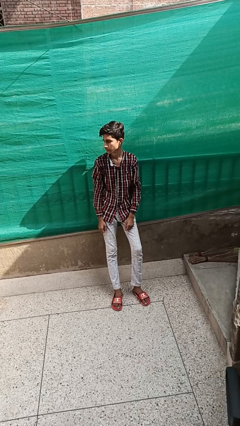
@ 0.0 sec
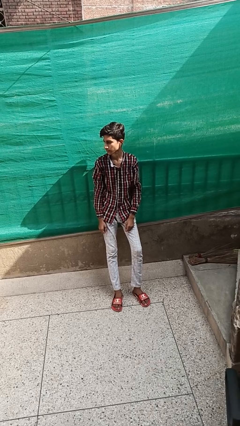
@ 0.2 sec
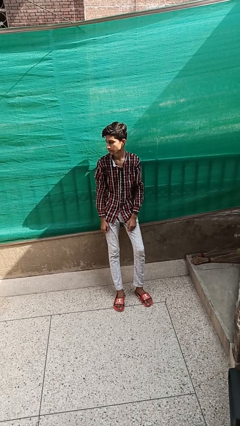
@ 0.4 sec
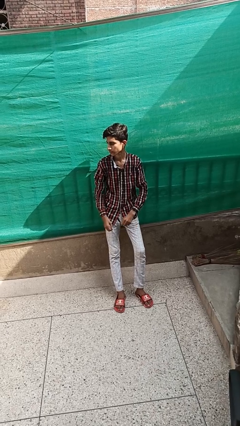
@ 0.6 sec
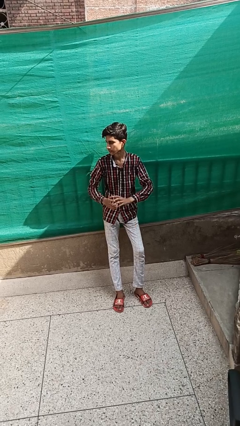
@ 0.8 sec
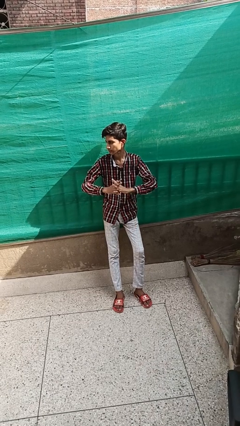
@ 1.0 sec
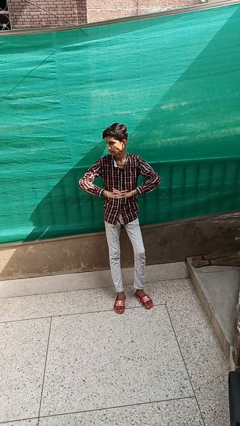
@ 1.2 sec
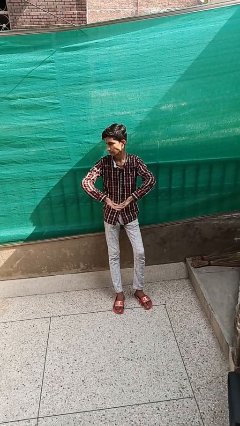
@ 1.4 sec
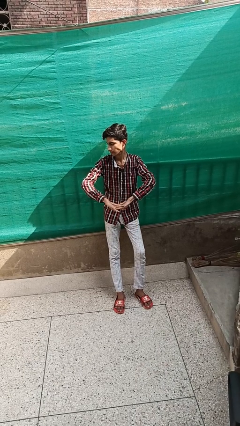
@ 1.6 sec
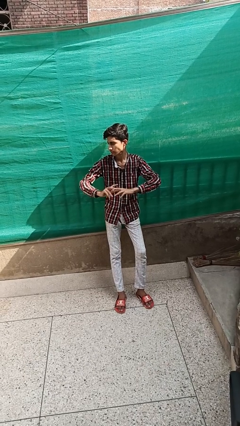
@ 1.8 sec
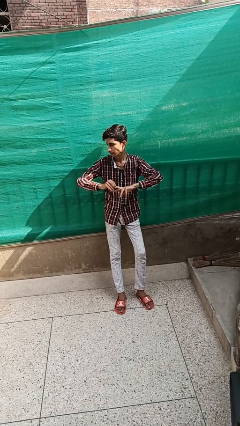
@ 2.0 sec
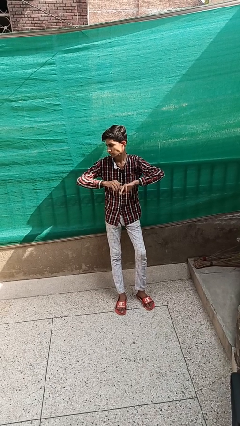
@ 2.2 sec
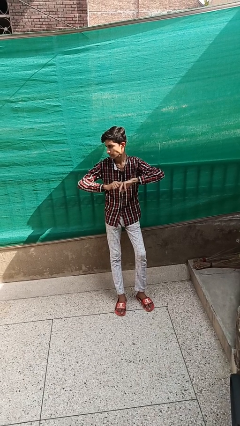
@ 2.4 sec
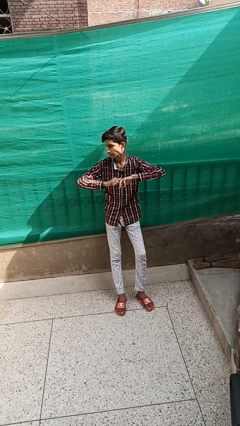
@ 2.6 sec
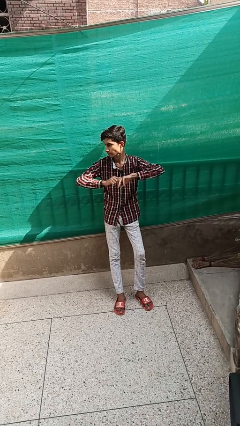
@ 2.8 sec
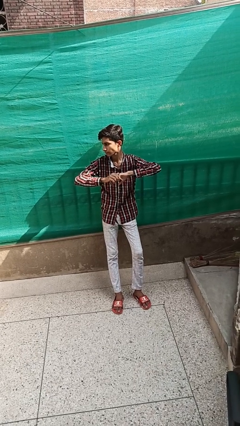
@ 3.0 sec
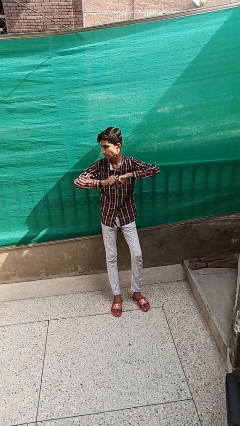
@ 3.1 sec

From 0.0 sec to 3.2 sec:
person cracks knuckles

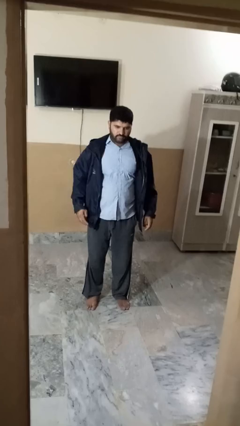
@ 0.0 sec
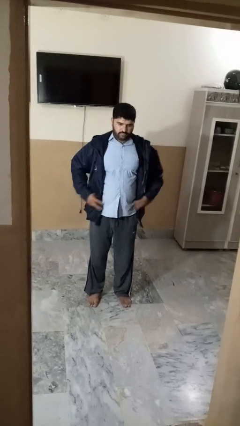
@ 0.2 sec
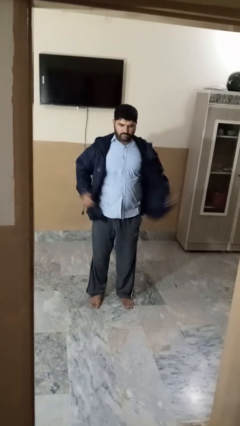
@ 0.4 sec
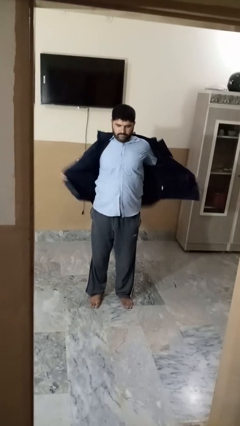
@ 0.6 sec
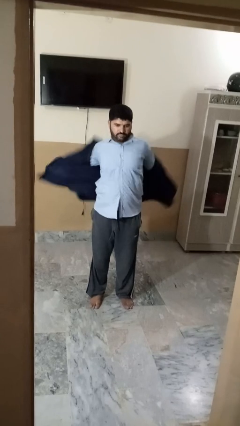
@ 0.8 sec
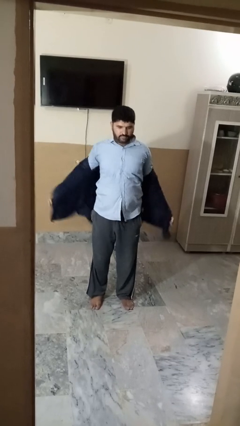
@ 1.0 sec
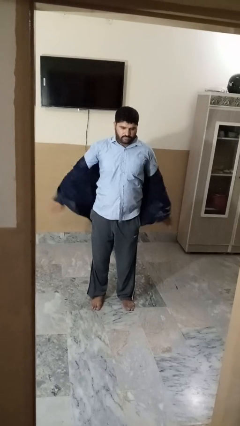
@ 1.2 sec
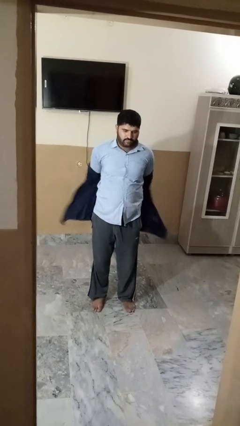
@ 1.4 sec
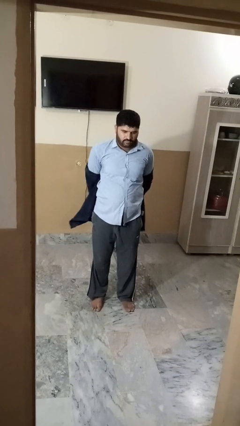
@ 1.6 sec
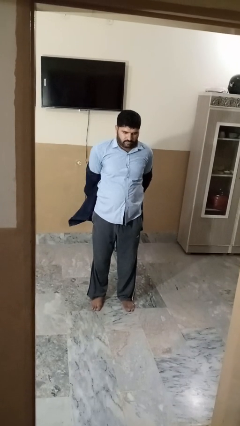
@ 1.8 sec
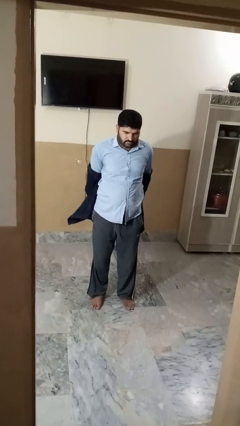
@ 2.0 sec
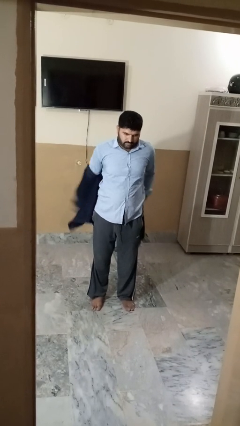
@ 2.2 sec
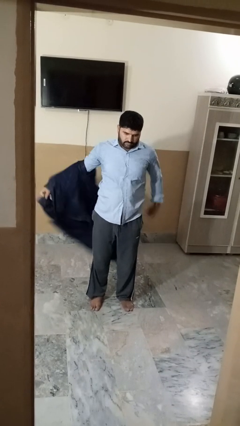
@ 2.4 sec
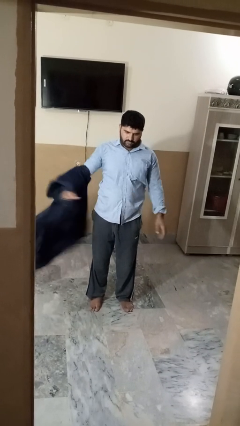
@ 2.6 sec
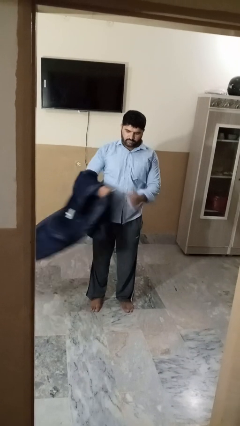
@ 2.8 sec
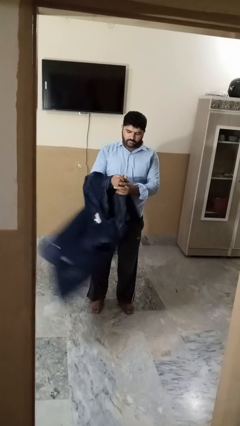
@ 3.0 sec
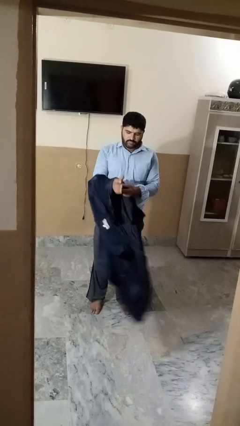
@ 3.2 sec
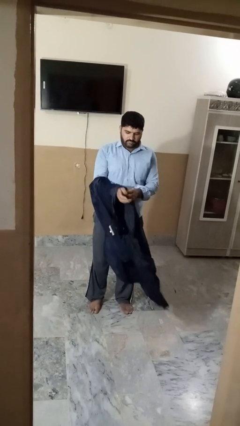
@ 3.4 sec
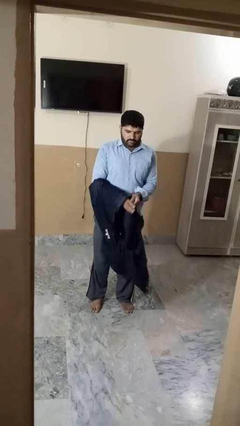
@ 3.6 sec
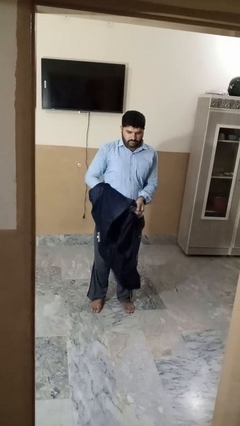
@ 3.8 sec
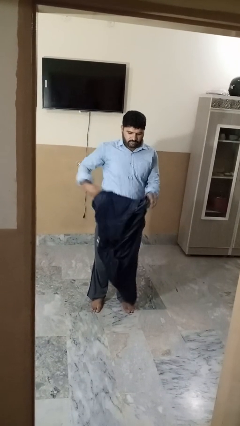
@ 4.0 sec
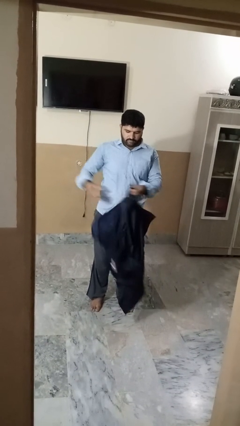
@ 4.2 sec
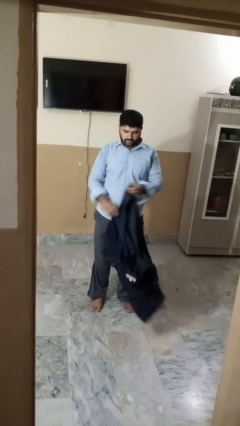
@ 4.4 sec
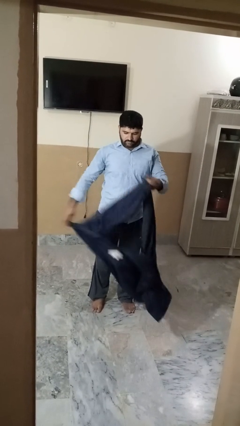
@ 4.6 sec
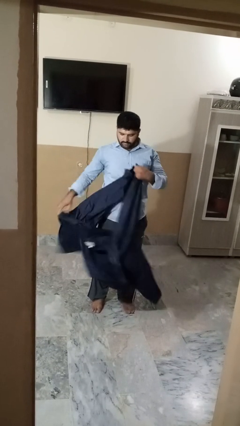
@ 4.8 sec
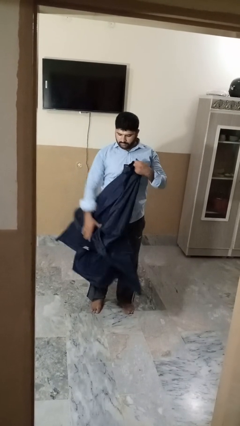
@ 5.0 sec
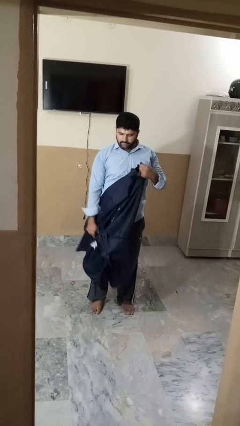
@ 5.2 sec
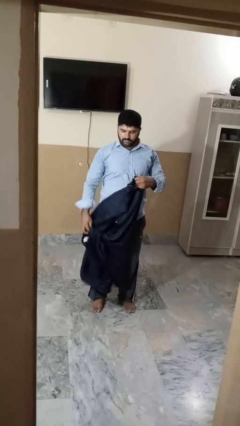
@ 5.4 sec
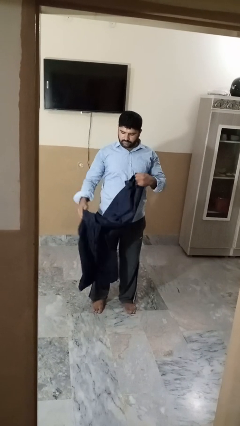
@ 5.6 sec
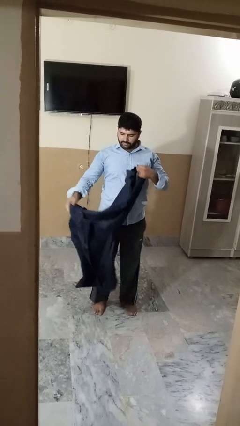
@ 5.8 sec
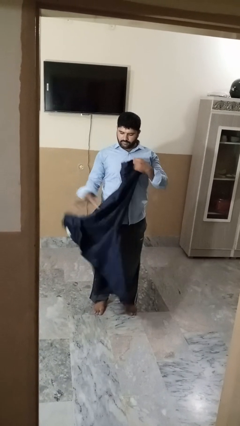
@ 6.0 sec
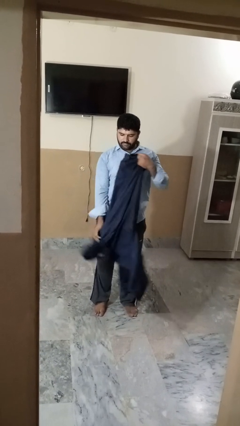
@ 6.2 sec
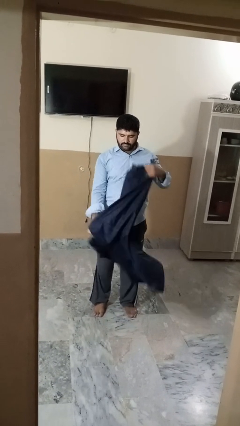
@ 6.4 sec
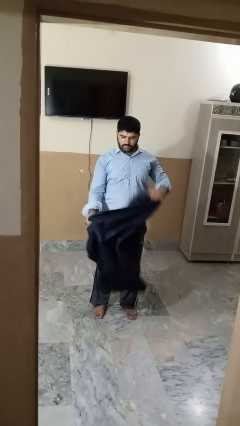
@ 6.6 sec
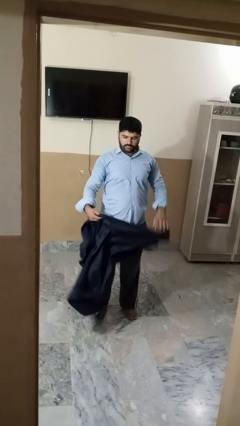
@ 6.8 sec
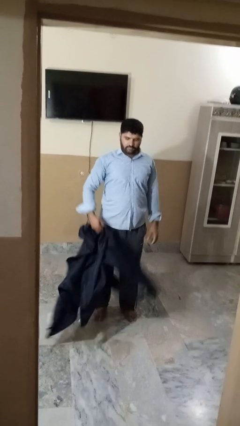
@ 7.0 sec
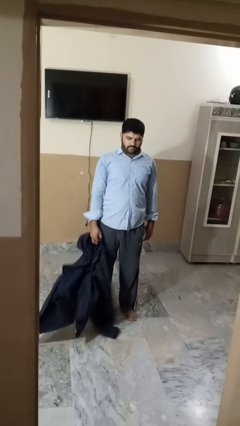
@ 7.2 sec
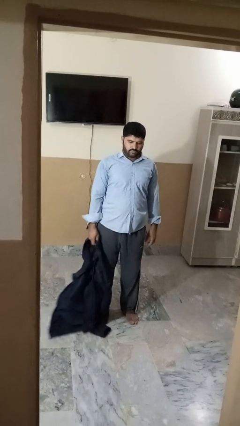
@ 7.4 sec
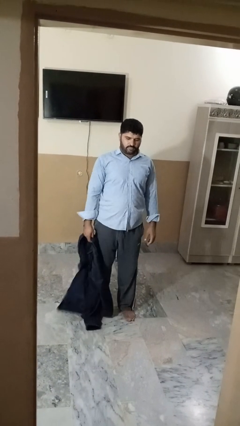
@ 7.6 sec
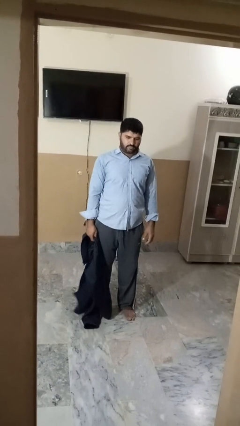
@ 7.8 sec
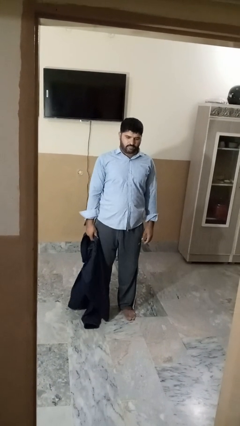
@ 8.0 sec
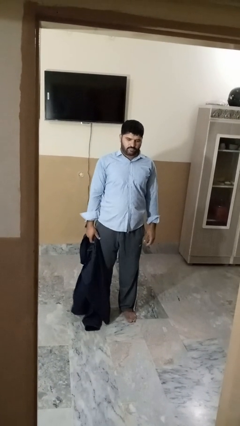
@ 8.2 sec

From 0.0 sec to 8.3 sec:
person takes off jacket

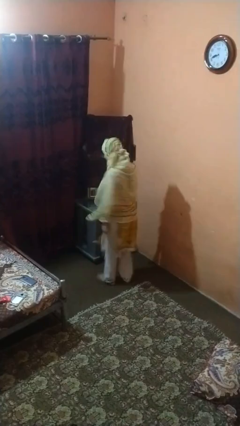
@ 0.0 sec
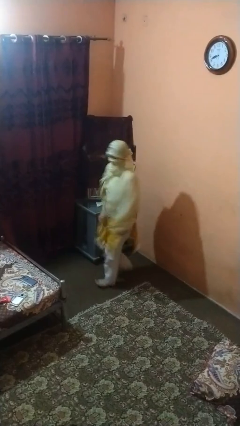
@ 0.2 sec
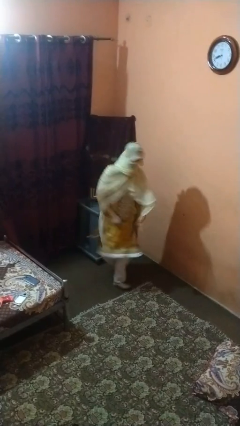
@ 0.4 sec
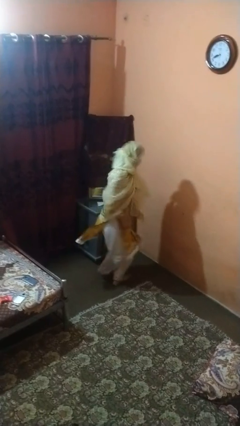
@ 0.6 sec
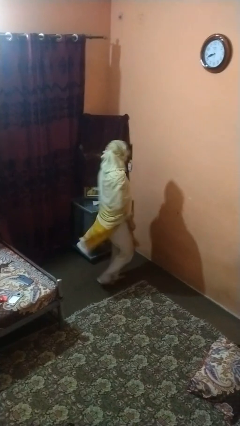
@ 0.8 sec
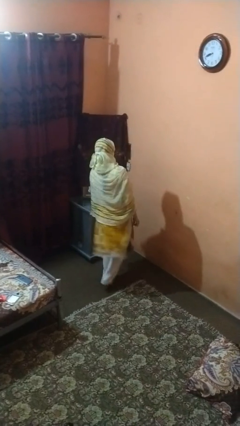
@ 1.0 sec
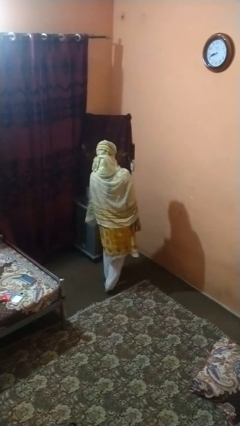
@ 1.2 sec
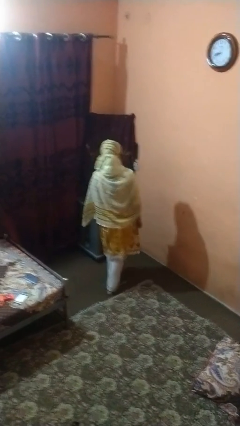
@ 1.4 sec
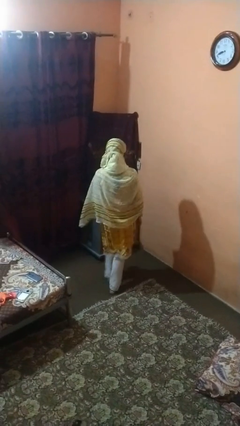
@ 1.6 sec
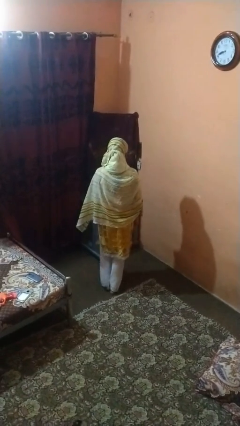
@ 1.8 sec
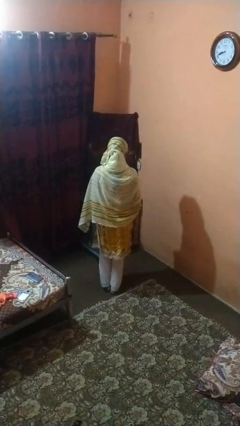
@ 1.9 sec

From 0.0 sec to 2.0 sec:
person twirls

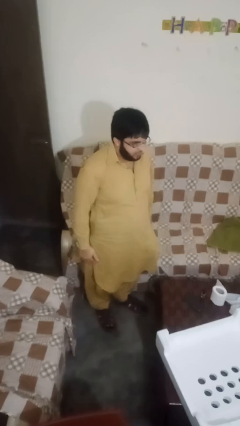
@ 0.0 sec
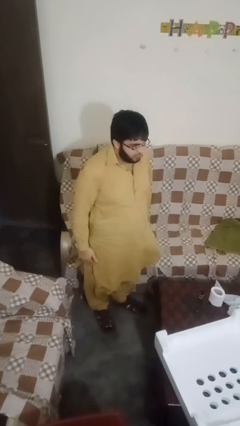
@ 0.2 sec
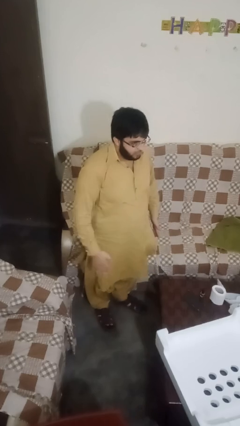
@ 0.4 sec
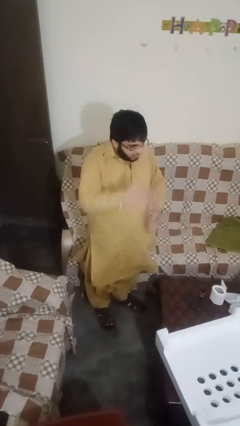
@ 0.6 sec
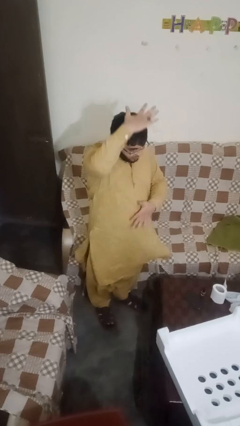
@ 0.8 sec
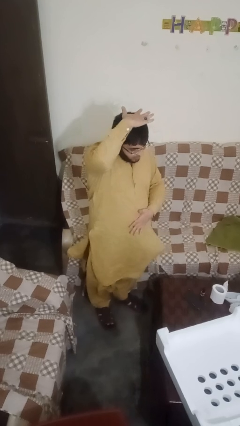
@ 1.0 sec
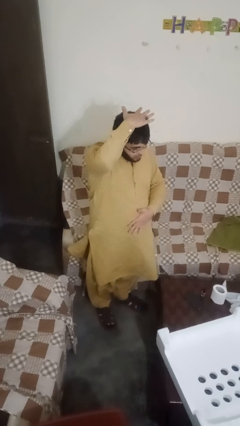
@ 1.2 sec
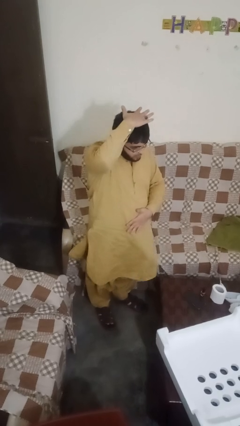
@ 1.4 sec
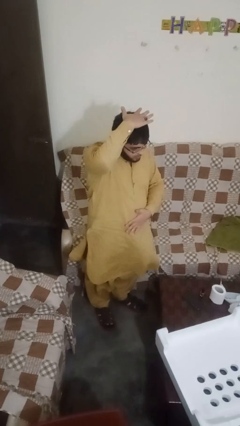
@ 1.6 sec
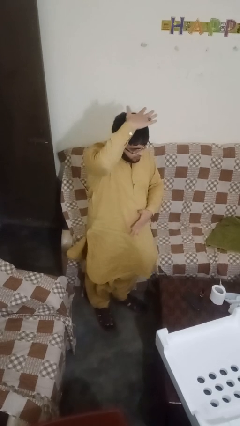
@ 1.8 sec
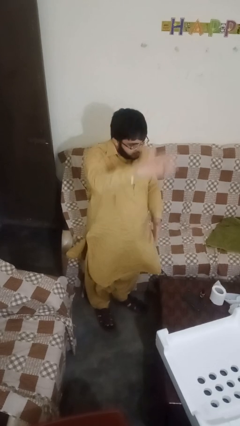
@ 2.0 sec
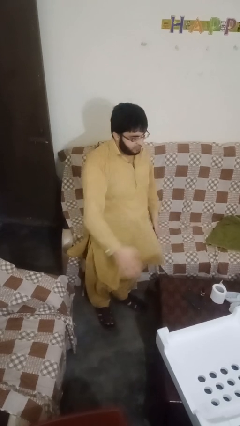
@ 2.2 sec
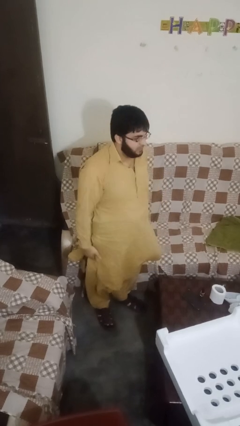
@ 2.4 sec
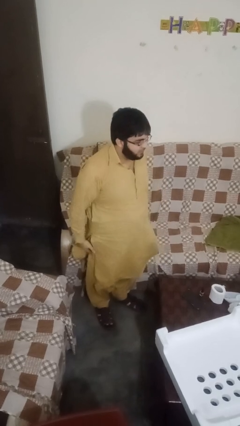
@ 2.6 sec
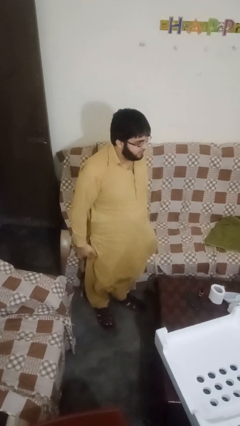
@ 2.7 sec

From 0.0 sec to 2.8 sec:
person pats head

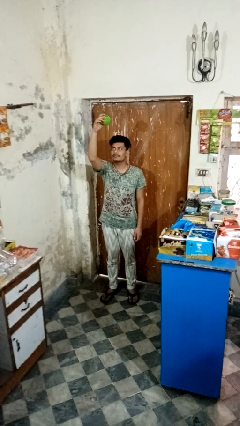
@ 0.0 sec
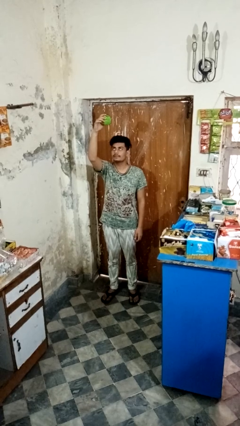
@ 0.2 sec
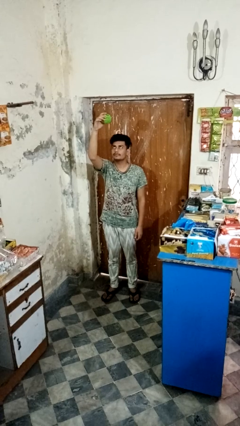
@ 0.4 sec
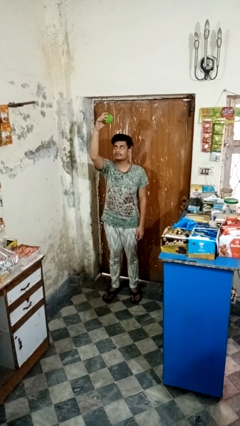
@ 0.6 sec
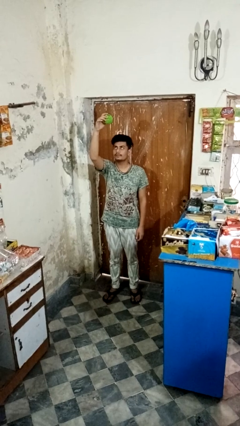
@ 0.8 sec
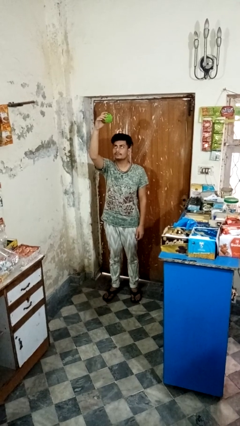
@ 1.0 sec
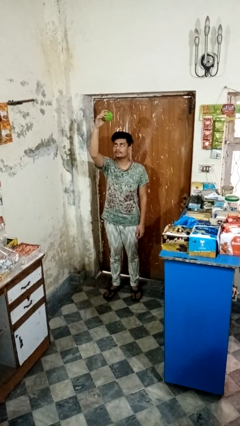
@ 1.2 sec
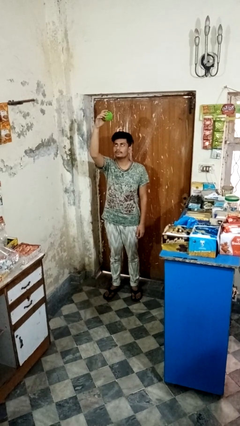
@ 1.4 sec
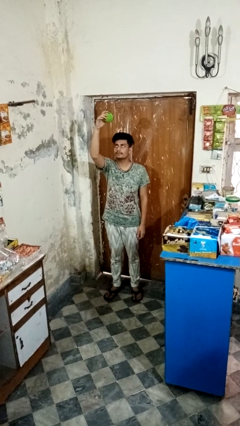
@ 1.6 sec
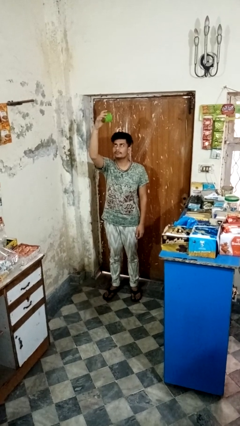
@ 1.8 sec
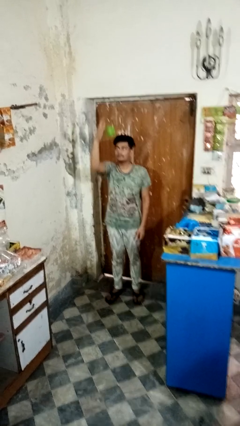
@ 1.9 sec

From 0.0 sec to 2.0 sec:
person drops object
